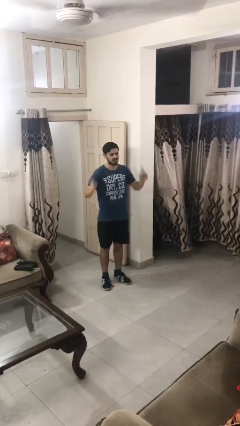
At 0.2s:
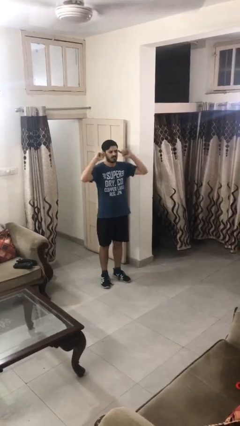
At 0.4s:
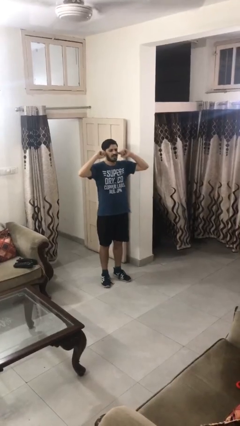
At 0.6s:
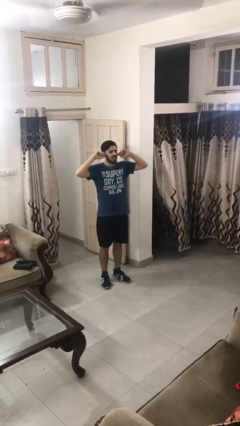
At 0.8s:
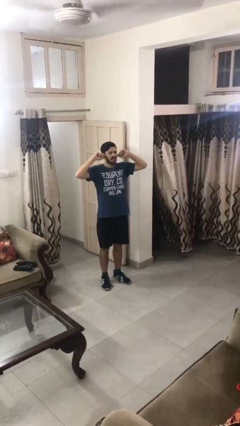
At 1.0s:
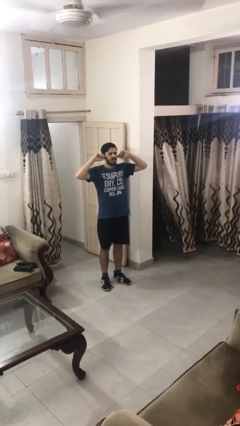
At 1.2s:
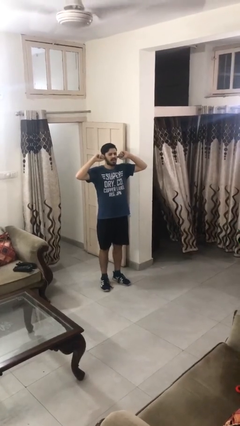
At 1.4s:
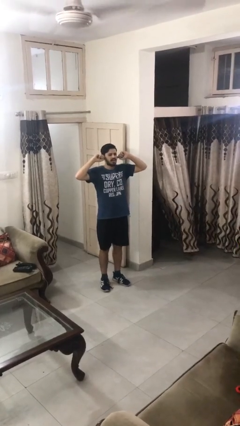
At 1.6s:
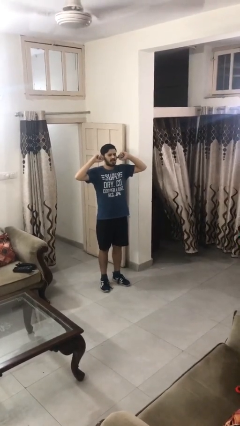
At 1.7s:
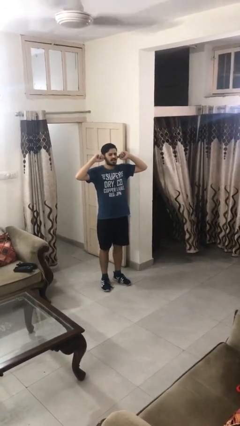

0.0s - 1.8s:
person puts fingers in ear

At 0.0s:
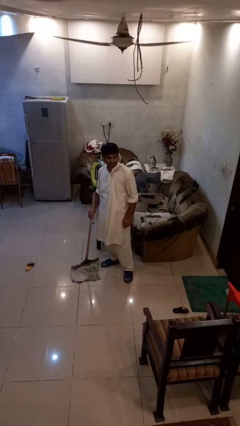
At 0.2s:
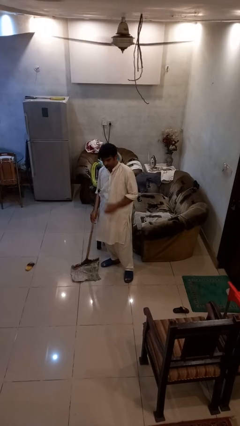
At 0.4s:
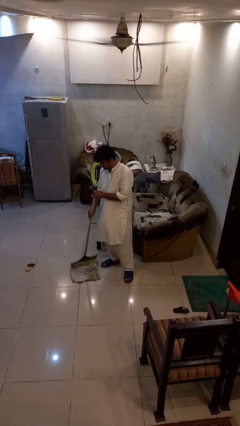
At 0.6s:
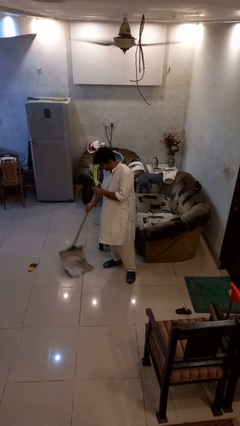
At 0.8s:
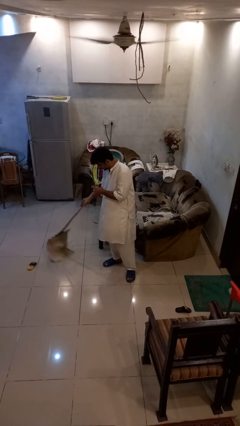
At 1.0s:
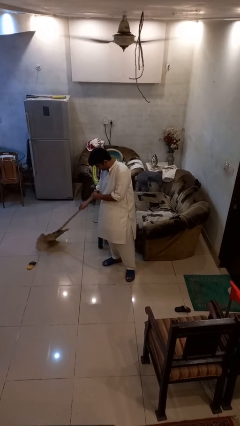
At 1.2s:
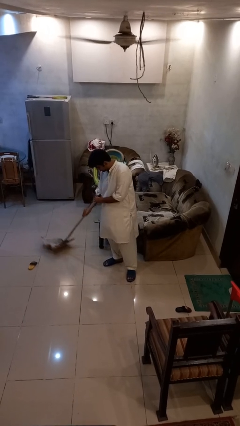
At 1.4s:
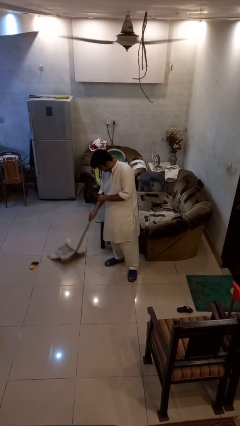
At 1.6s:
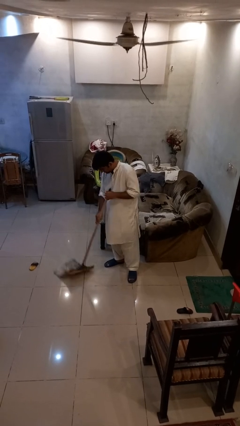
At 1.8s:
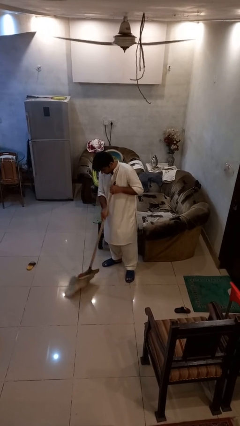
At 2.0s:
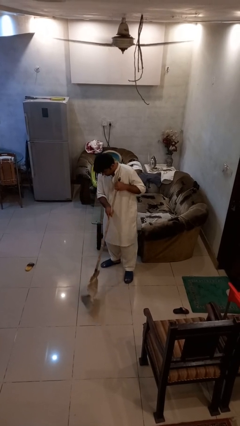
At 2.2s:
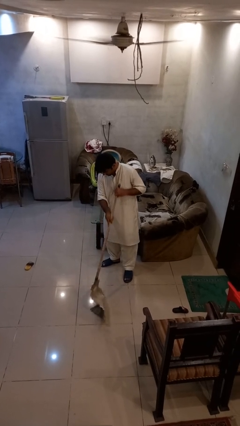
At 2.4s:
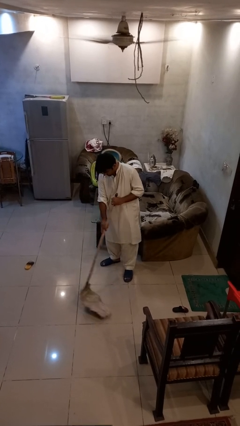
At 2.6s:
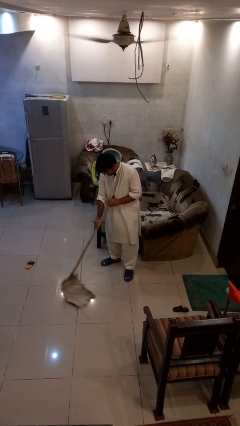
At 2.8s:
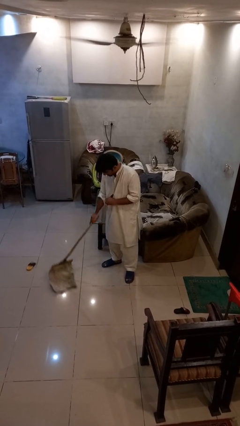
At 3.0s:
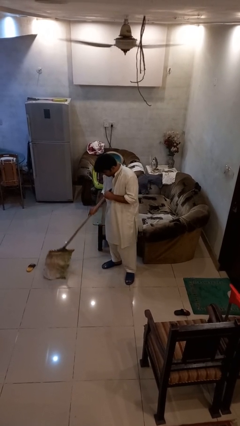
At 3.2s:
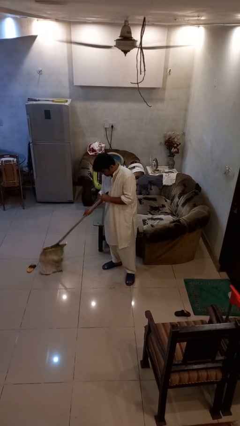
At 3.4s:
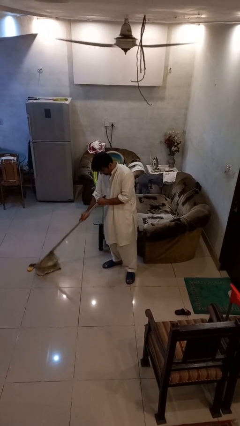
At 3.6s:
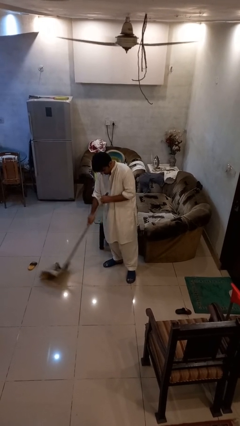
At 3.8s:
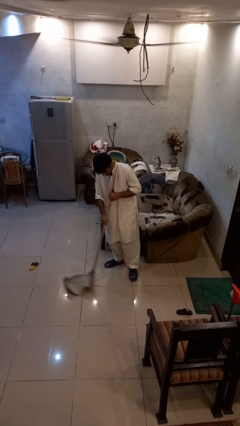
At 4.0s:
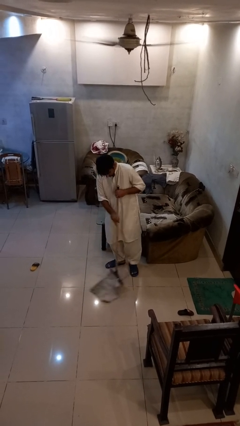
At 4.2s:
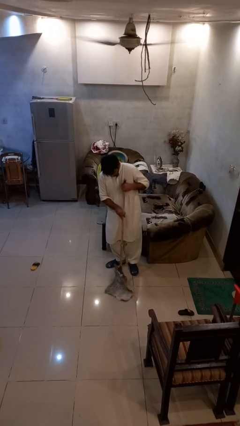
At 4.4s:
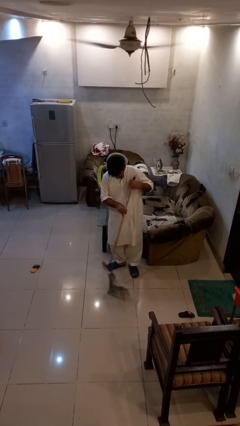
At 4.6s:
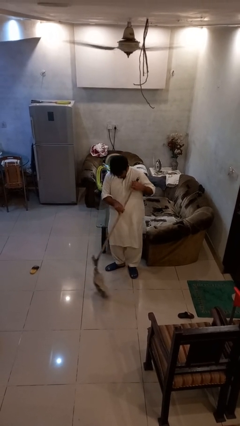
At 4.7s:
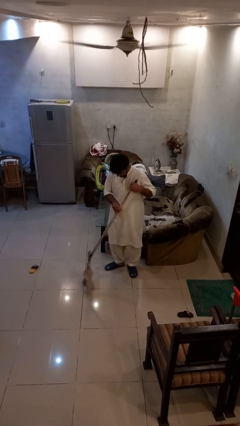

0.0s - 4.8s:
person mops

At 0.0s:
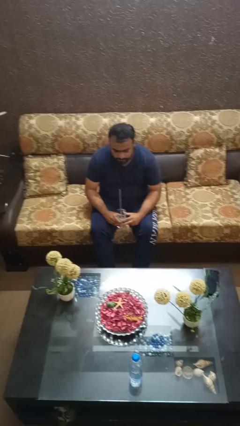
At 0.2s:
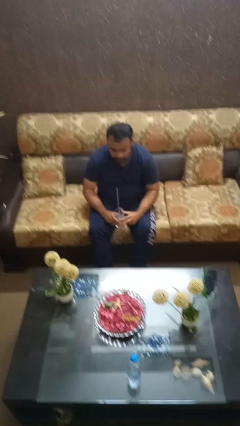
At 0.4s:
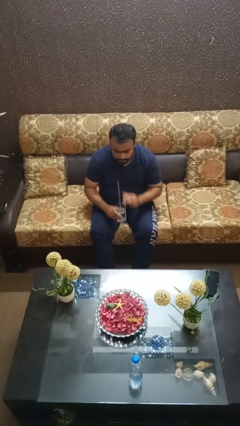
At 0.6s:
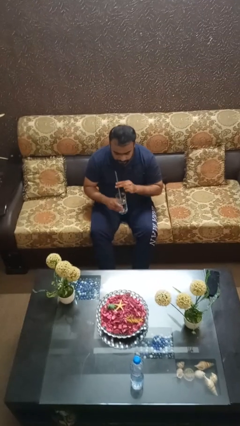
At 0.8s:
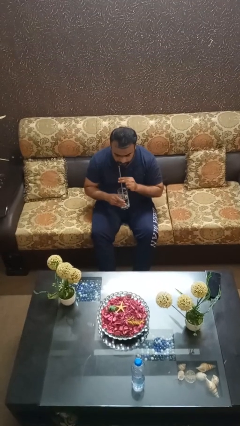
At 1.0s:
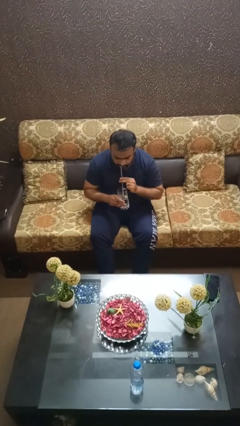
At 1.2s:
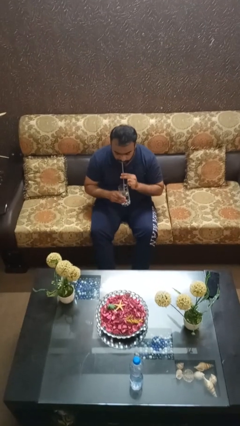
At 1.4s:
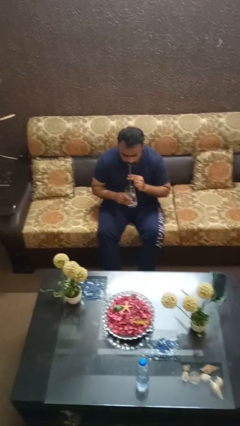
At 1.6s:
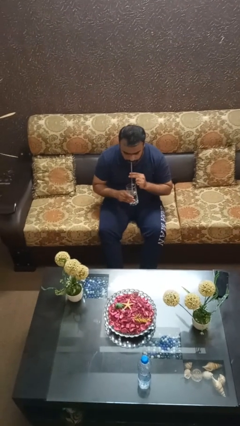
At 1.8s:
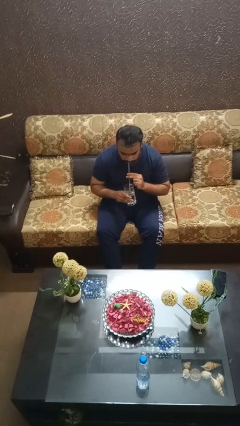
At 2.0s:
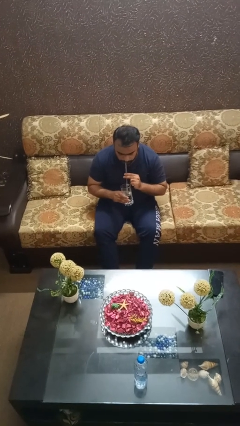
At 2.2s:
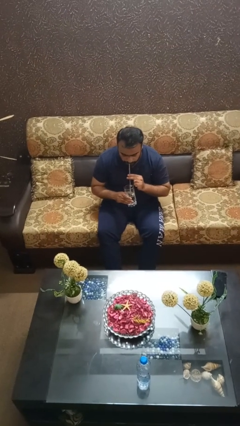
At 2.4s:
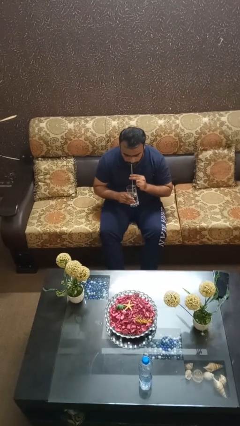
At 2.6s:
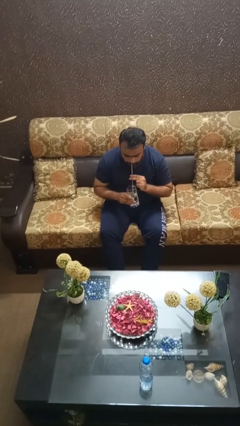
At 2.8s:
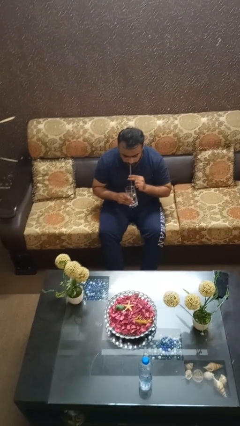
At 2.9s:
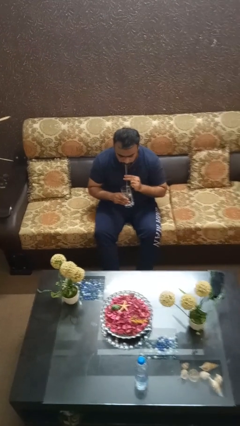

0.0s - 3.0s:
person drinks from straw

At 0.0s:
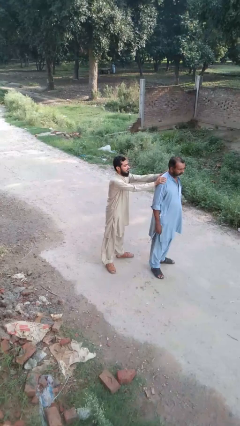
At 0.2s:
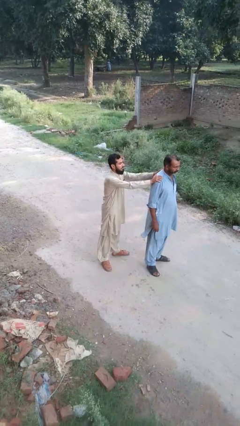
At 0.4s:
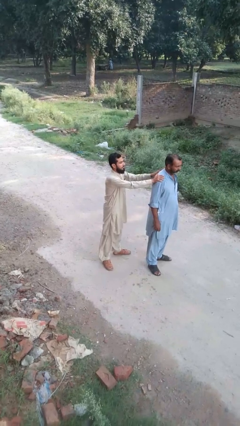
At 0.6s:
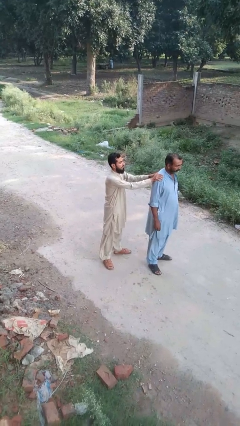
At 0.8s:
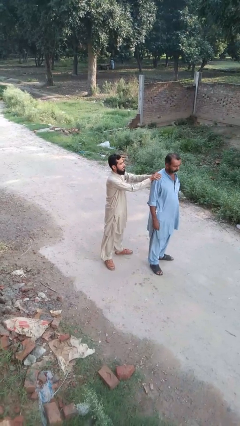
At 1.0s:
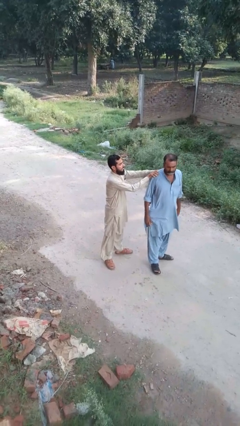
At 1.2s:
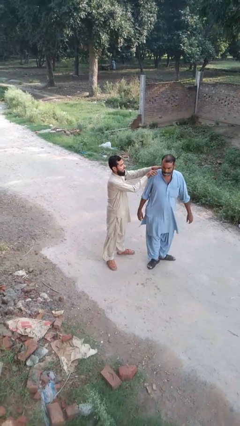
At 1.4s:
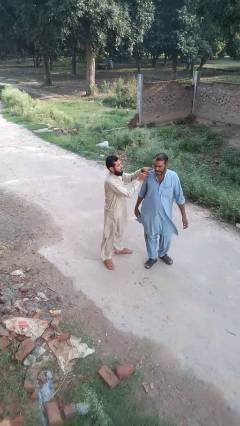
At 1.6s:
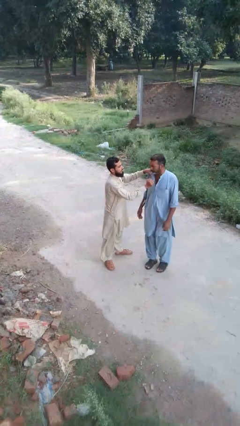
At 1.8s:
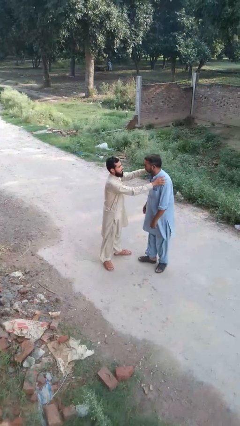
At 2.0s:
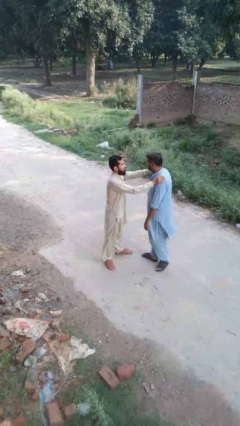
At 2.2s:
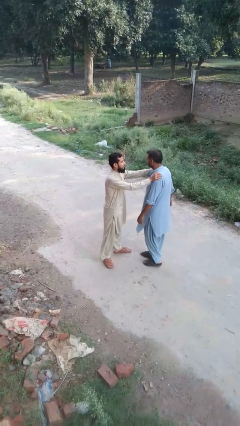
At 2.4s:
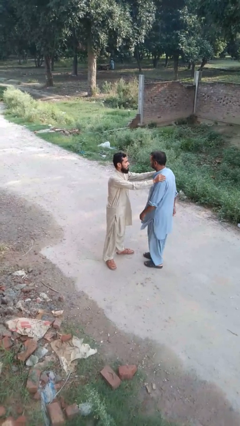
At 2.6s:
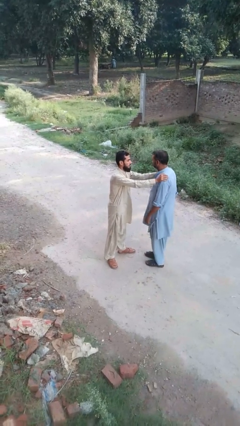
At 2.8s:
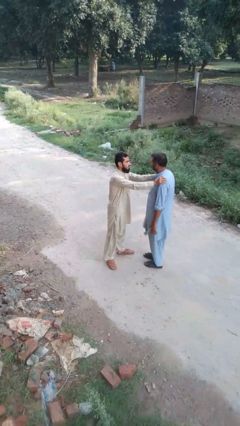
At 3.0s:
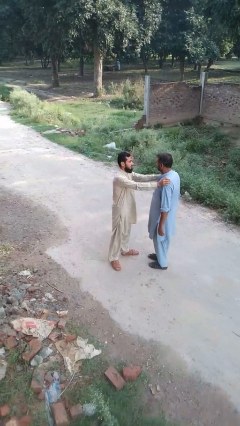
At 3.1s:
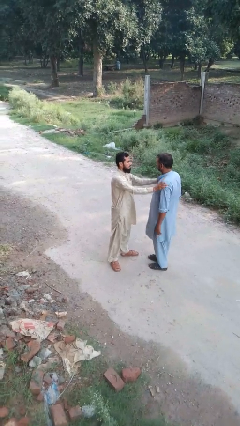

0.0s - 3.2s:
person spins person around

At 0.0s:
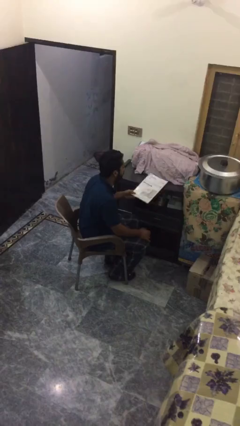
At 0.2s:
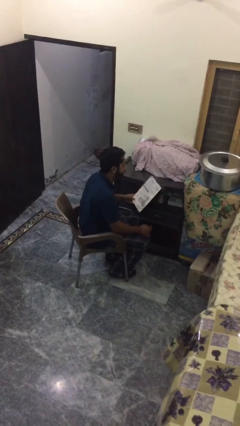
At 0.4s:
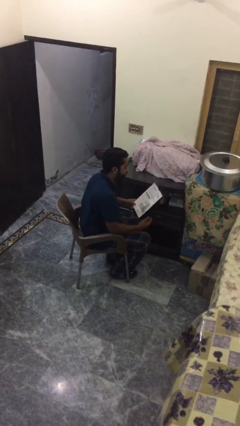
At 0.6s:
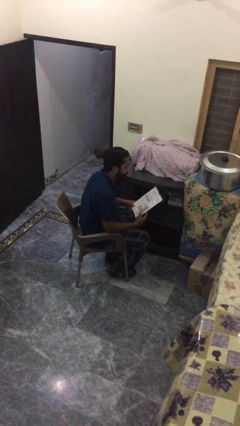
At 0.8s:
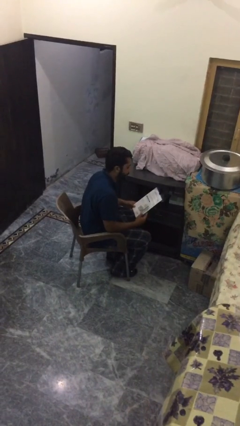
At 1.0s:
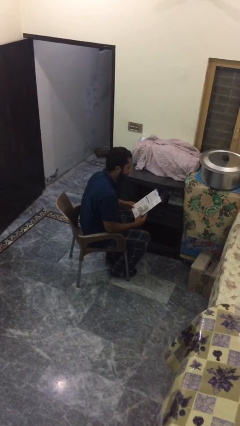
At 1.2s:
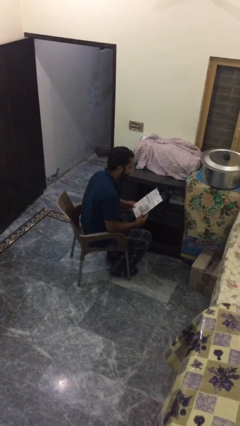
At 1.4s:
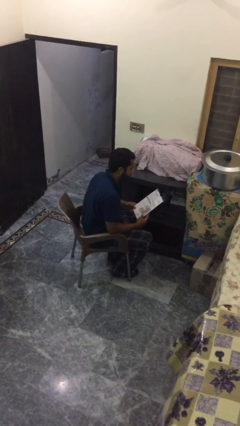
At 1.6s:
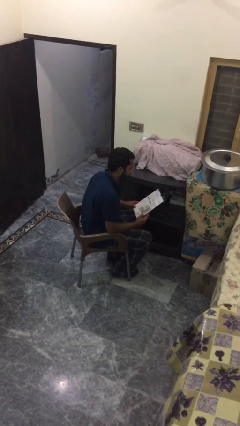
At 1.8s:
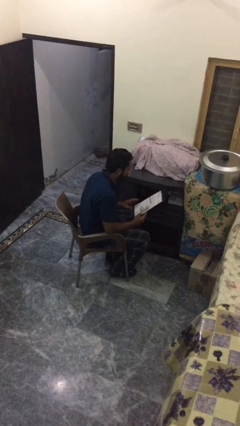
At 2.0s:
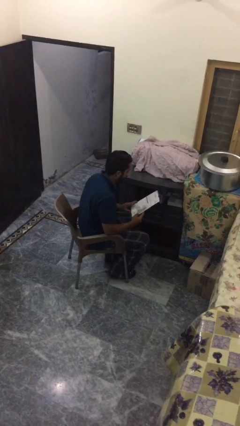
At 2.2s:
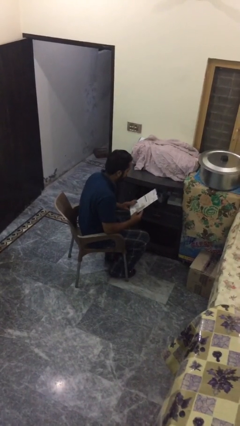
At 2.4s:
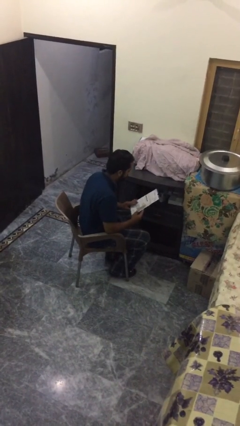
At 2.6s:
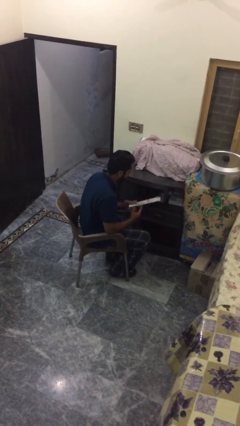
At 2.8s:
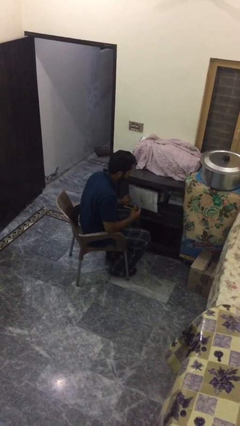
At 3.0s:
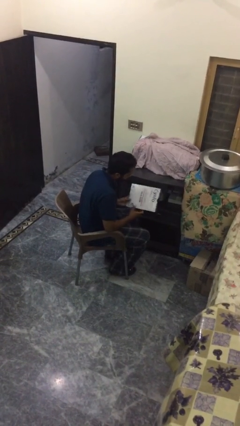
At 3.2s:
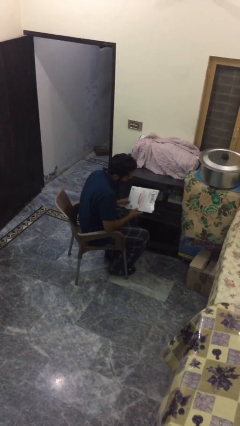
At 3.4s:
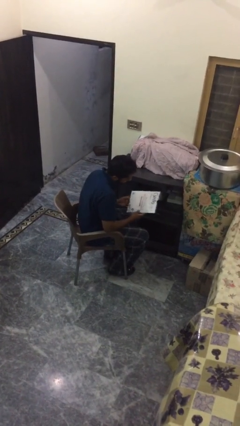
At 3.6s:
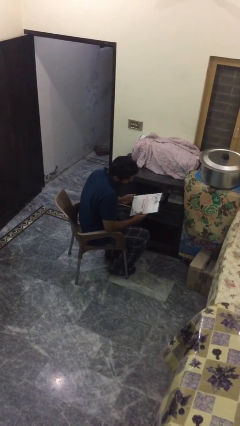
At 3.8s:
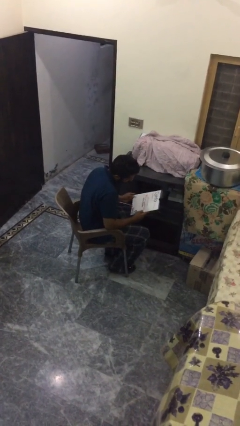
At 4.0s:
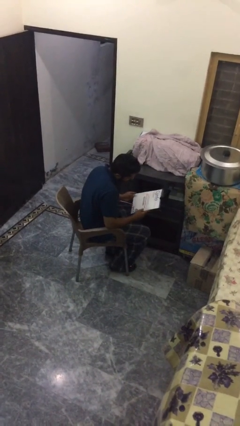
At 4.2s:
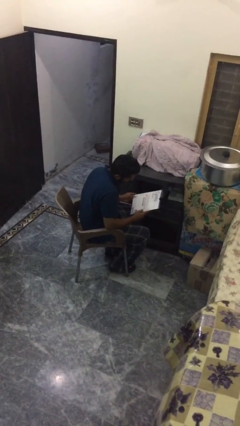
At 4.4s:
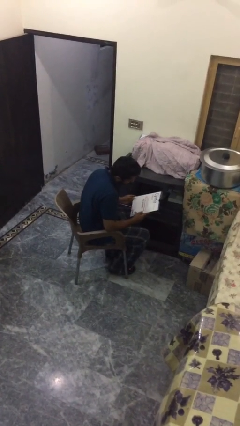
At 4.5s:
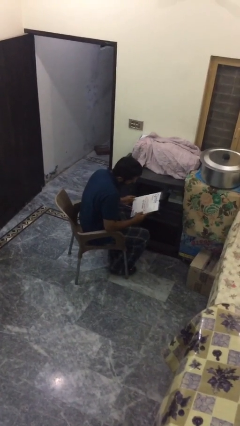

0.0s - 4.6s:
person reads document

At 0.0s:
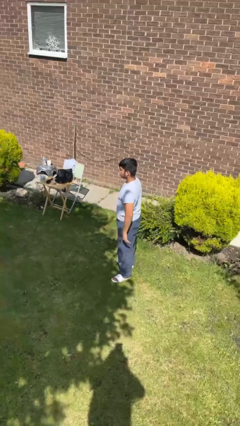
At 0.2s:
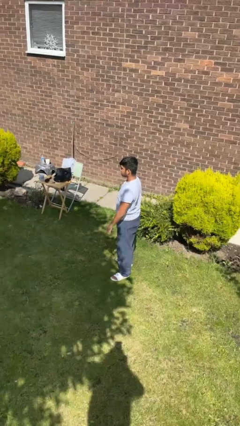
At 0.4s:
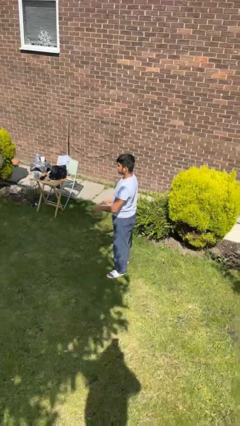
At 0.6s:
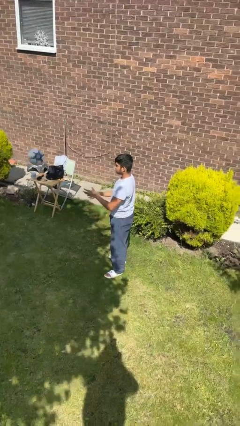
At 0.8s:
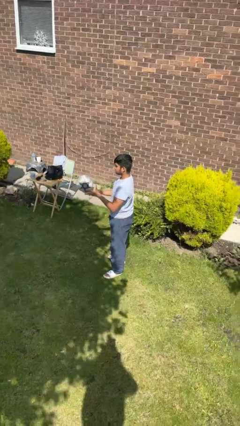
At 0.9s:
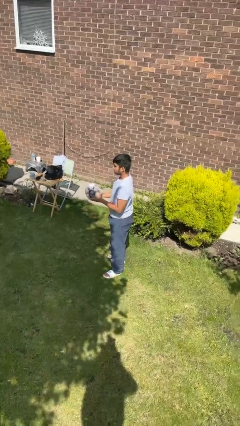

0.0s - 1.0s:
person catches object from person
